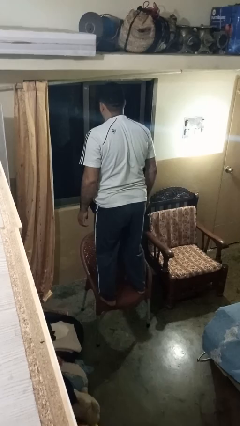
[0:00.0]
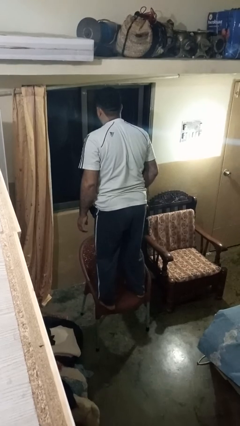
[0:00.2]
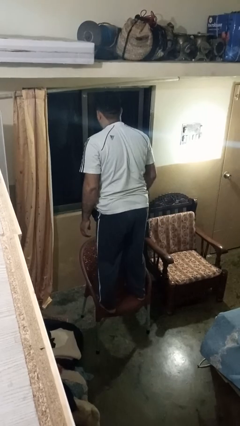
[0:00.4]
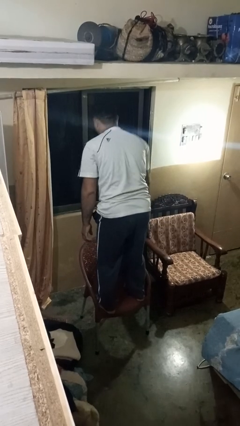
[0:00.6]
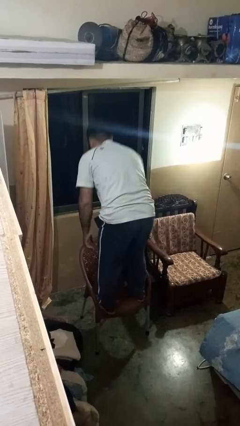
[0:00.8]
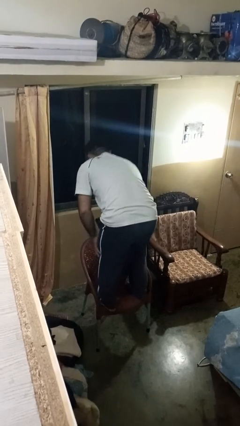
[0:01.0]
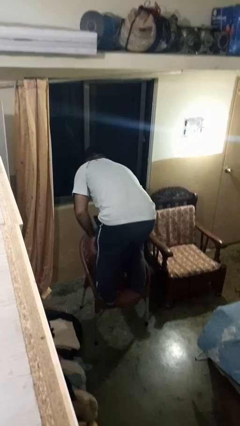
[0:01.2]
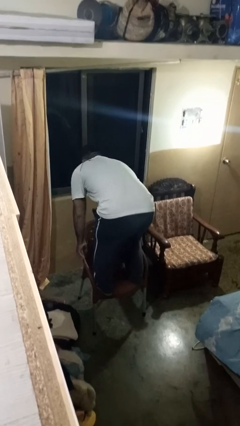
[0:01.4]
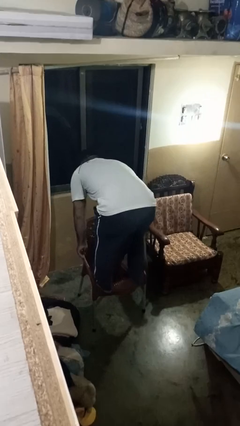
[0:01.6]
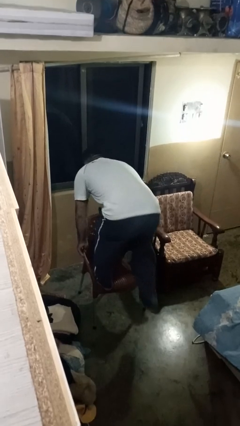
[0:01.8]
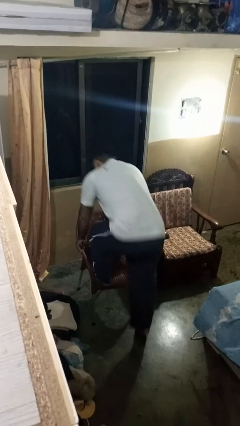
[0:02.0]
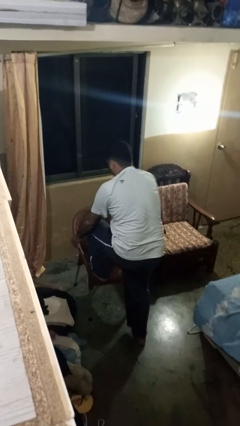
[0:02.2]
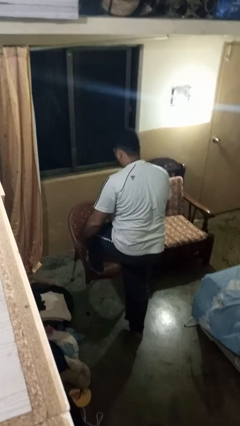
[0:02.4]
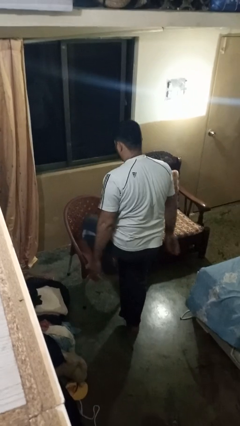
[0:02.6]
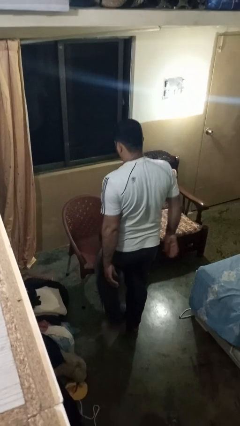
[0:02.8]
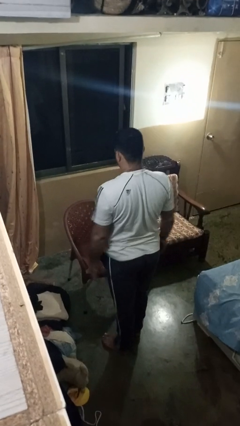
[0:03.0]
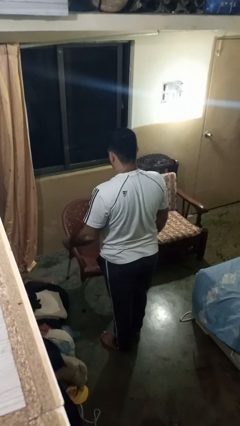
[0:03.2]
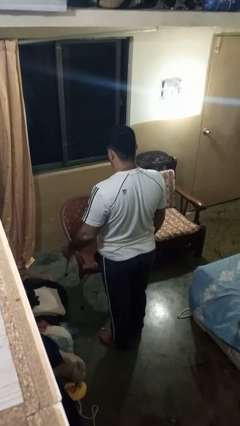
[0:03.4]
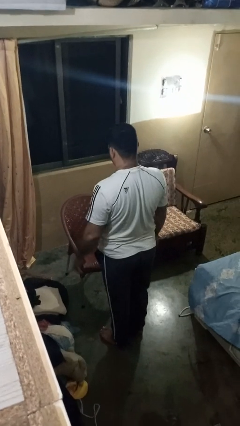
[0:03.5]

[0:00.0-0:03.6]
person climbs off chair

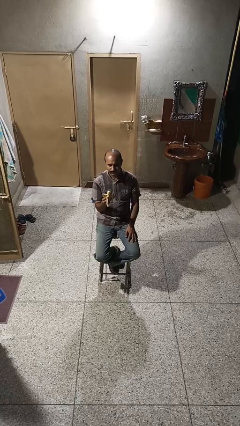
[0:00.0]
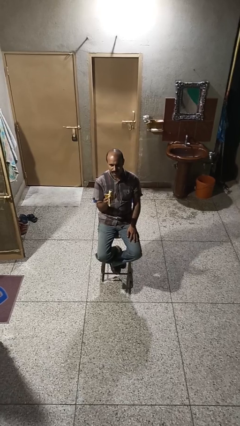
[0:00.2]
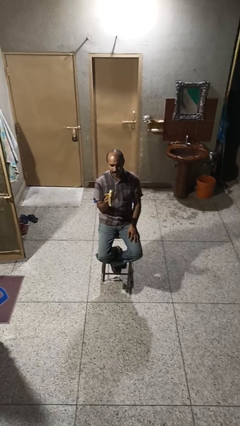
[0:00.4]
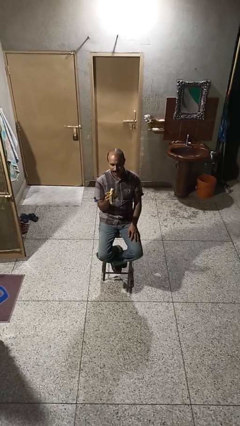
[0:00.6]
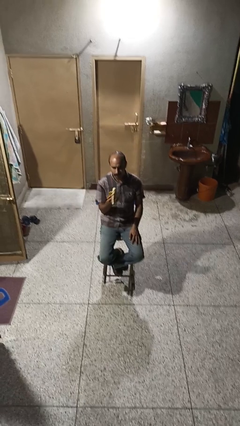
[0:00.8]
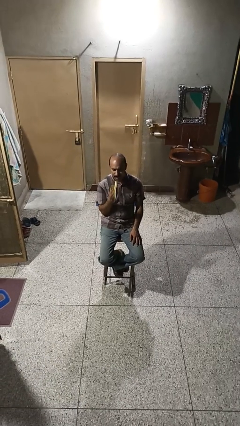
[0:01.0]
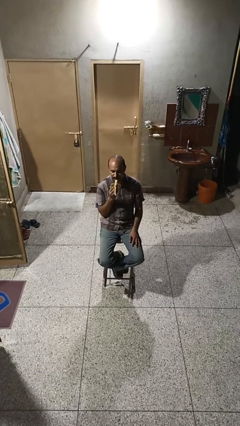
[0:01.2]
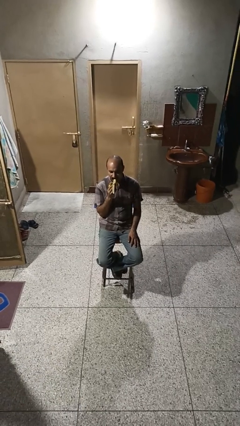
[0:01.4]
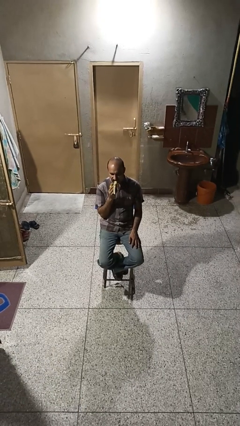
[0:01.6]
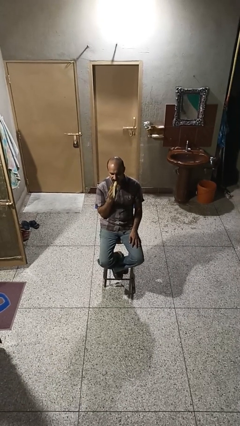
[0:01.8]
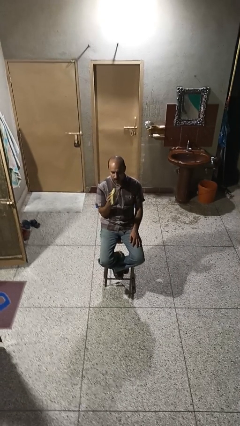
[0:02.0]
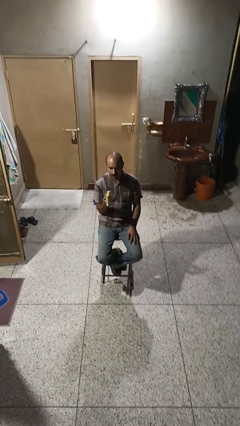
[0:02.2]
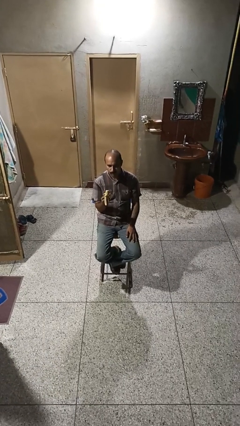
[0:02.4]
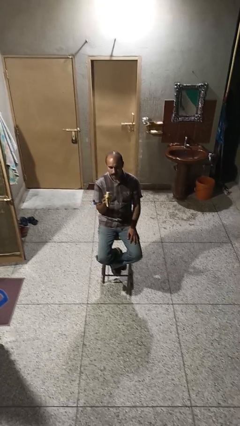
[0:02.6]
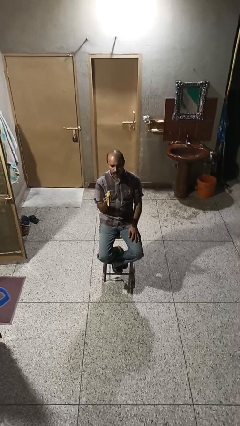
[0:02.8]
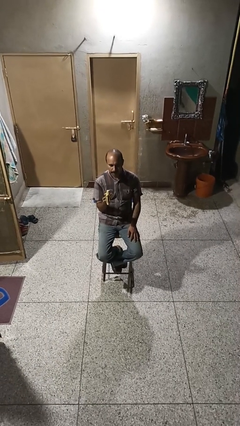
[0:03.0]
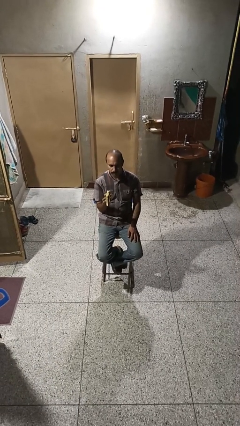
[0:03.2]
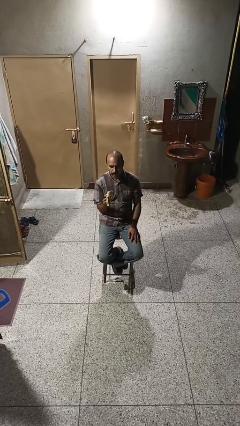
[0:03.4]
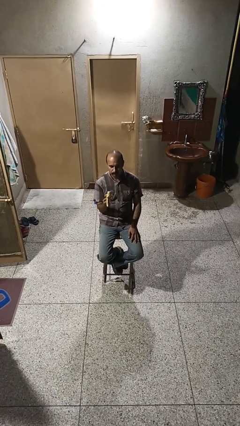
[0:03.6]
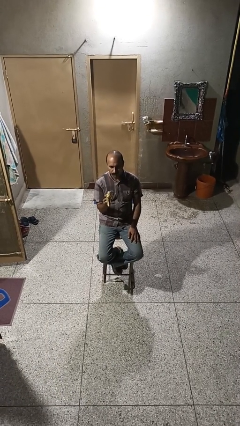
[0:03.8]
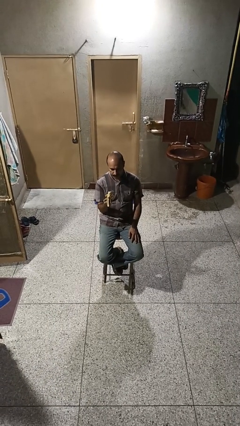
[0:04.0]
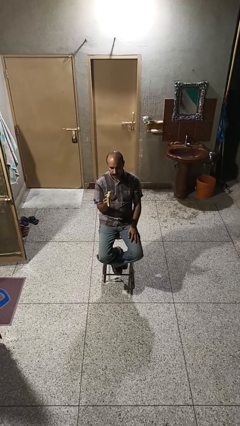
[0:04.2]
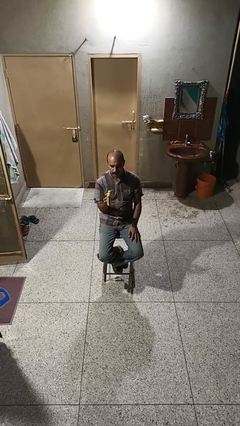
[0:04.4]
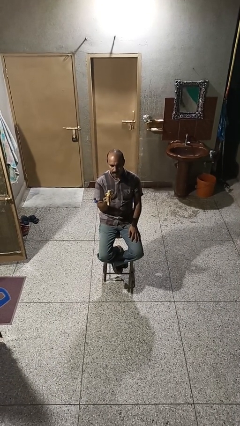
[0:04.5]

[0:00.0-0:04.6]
person eats banana

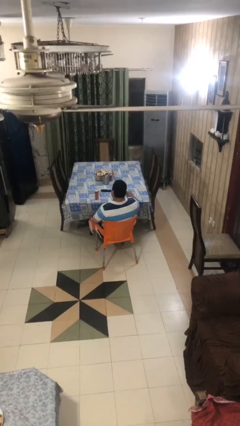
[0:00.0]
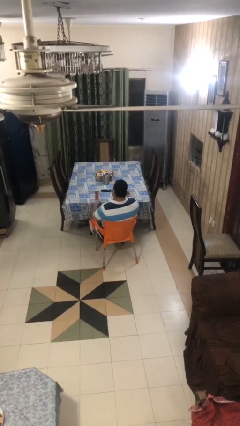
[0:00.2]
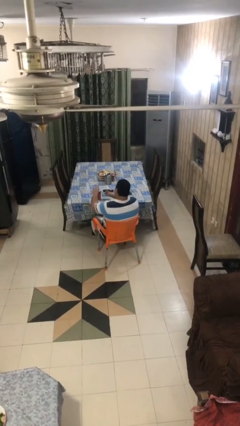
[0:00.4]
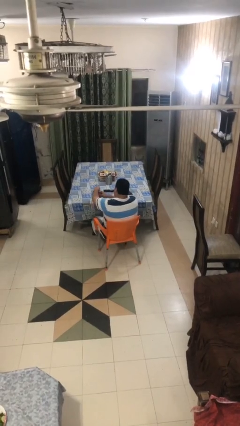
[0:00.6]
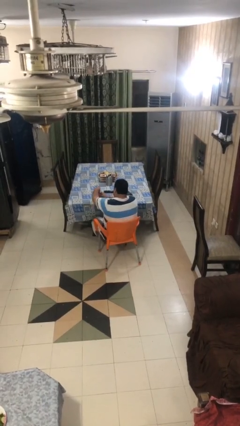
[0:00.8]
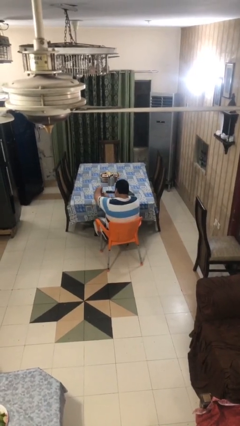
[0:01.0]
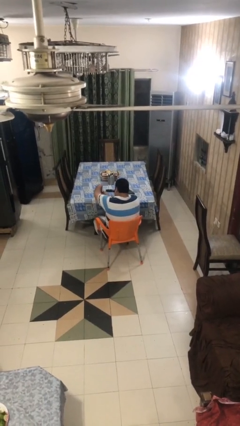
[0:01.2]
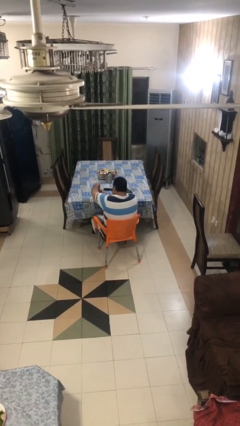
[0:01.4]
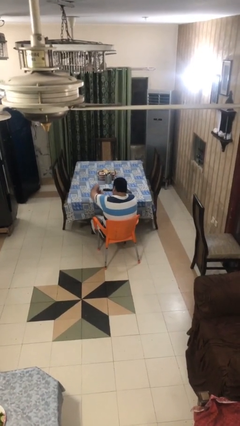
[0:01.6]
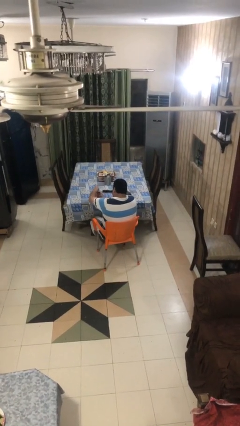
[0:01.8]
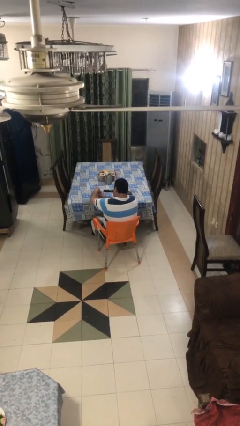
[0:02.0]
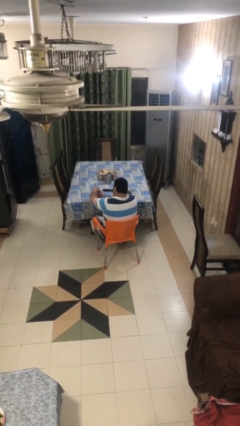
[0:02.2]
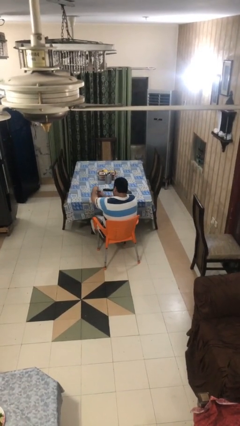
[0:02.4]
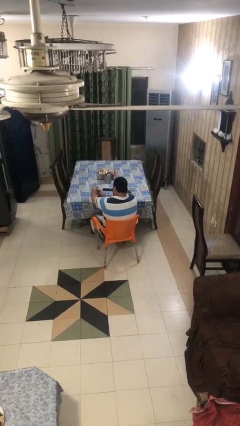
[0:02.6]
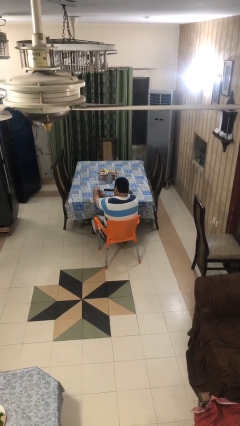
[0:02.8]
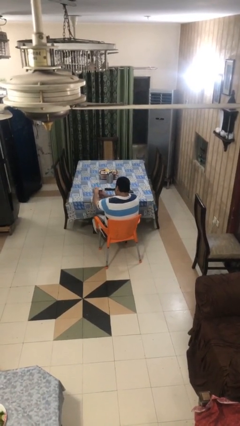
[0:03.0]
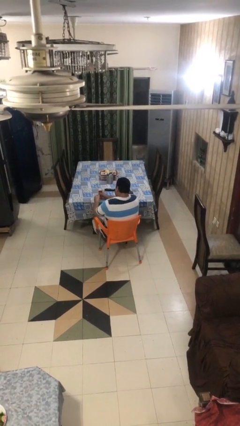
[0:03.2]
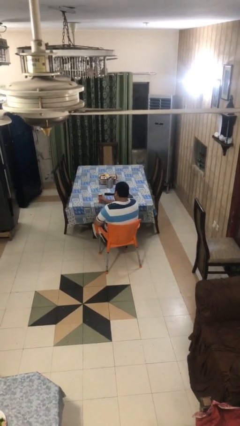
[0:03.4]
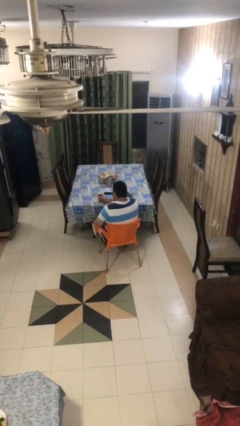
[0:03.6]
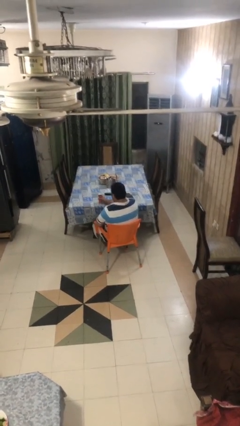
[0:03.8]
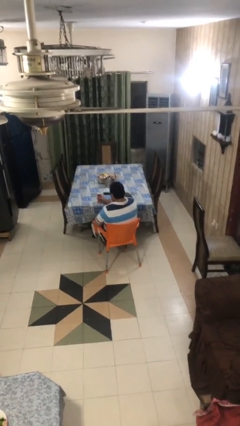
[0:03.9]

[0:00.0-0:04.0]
person opens beverage can

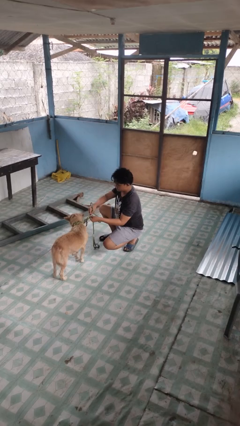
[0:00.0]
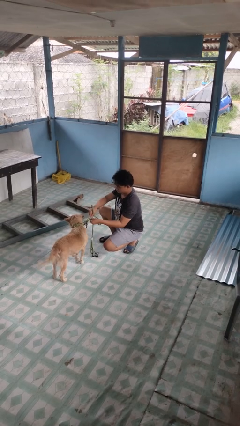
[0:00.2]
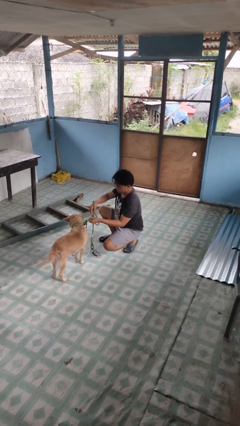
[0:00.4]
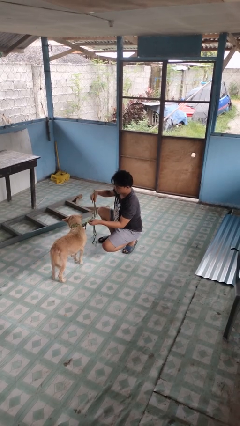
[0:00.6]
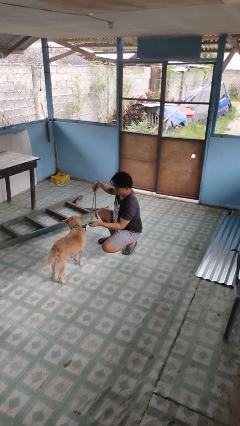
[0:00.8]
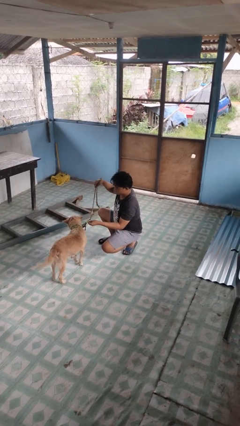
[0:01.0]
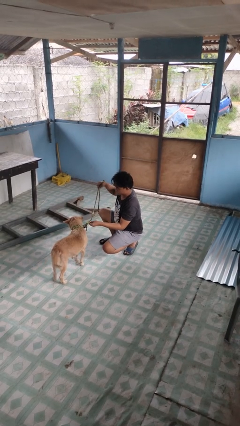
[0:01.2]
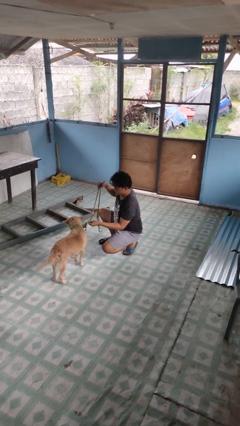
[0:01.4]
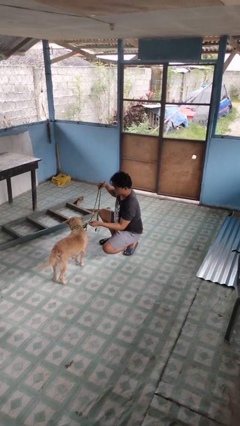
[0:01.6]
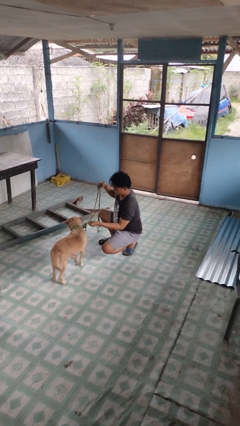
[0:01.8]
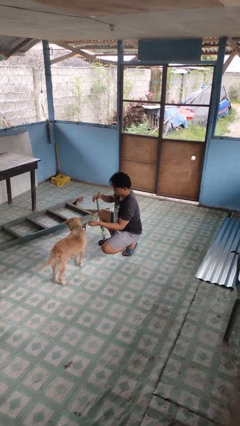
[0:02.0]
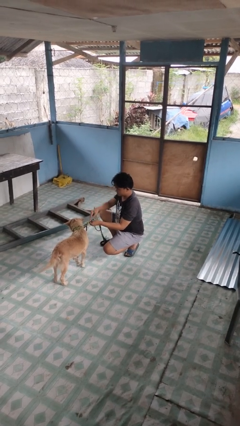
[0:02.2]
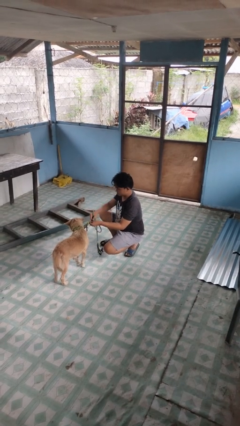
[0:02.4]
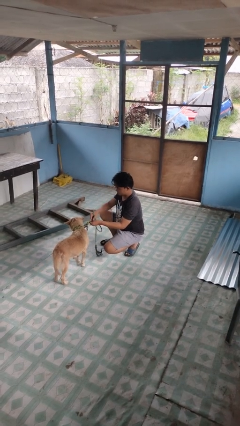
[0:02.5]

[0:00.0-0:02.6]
person attaches leash to dog

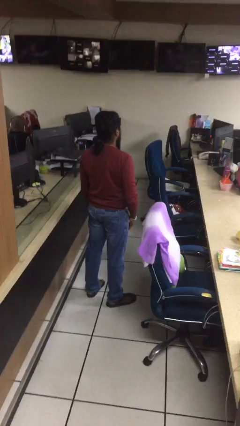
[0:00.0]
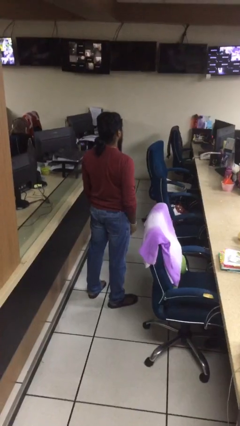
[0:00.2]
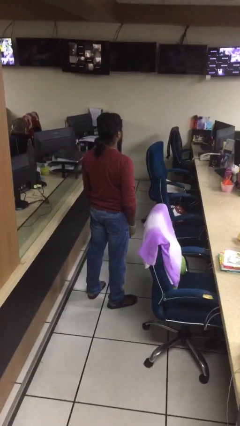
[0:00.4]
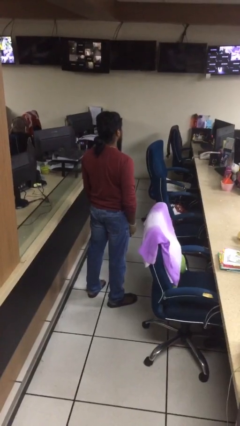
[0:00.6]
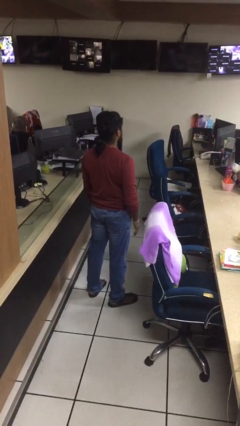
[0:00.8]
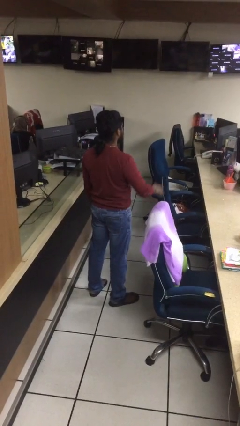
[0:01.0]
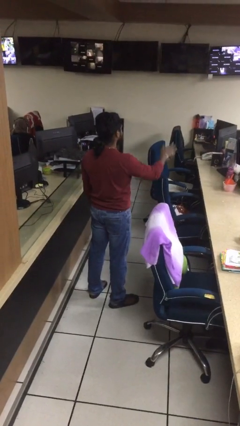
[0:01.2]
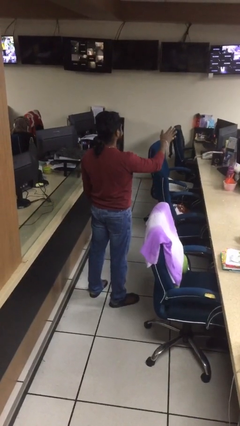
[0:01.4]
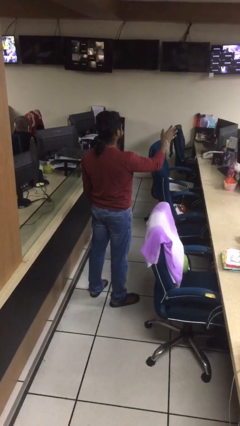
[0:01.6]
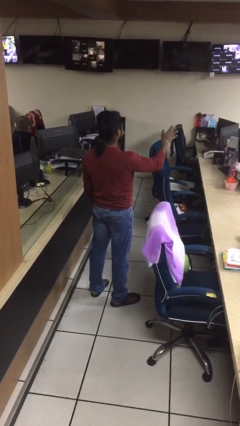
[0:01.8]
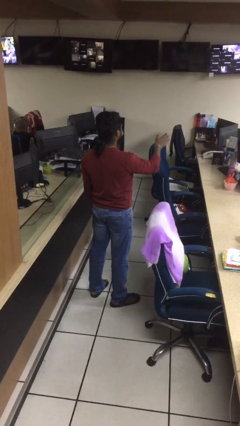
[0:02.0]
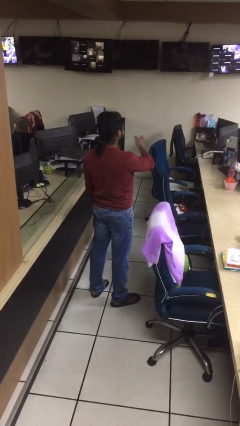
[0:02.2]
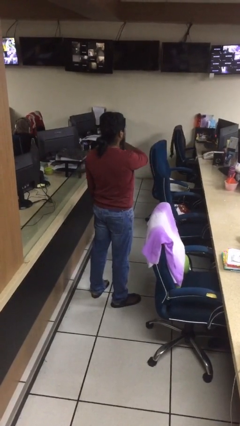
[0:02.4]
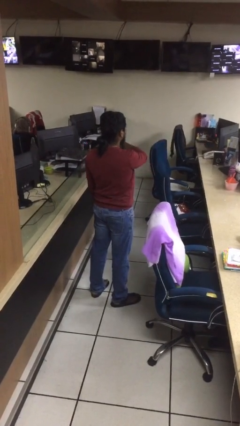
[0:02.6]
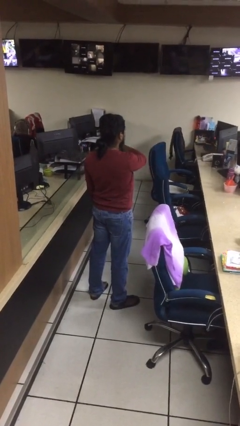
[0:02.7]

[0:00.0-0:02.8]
person gestures swipe left

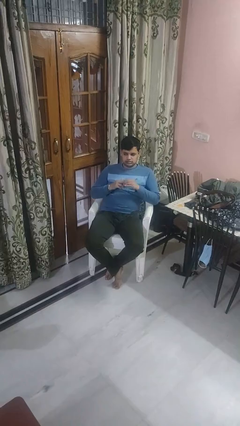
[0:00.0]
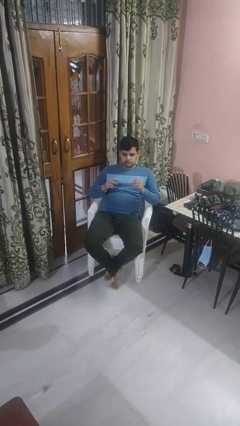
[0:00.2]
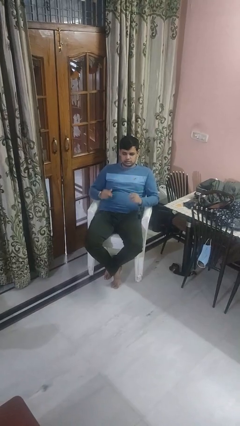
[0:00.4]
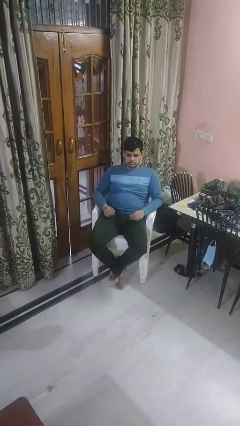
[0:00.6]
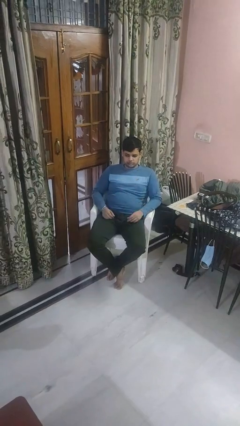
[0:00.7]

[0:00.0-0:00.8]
person takes off ring
